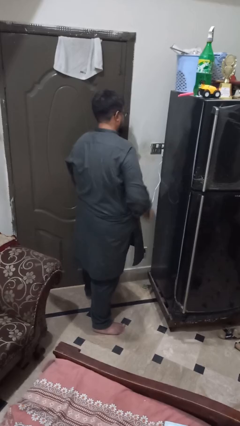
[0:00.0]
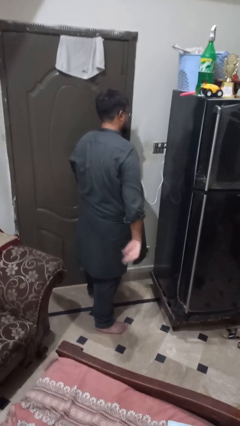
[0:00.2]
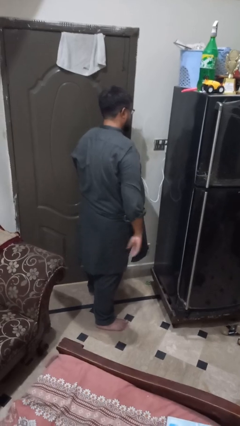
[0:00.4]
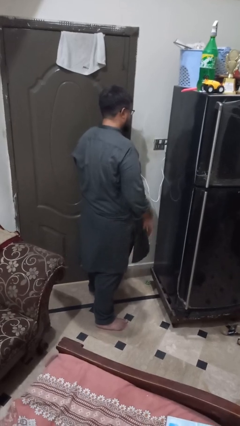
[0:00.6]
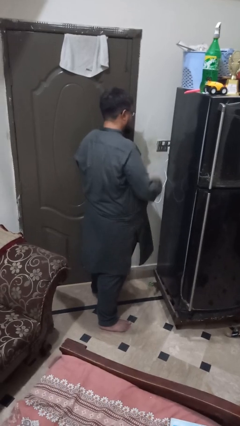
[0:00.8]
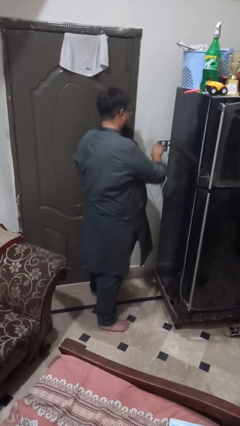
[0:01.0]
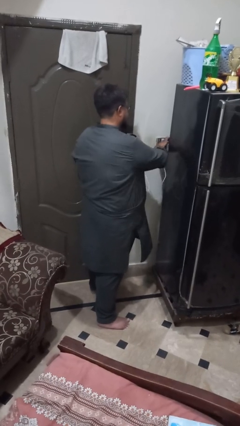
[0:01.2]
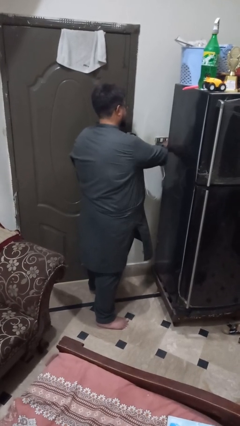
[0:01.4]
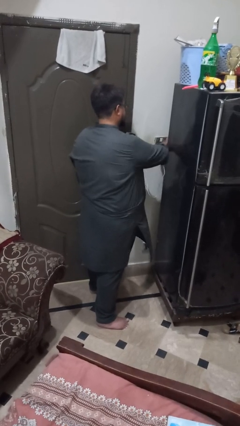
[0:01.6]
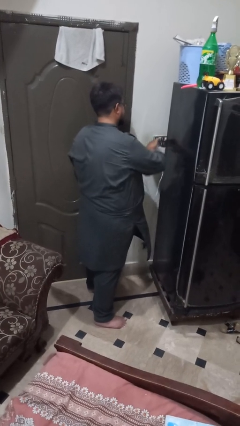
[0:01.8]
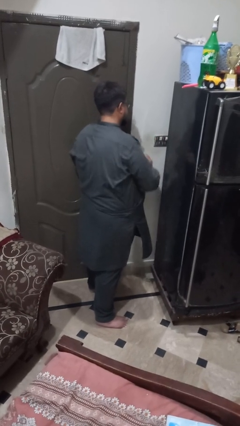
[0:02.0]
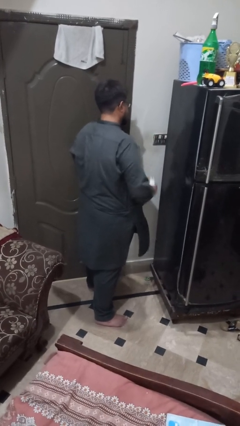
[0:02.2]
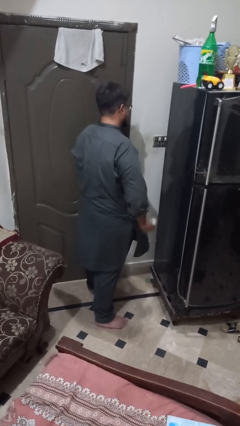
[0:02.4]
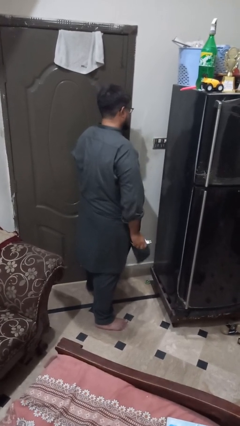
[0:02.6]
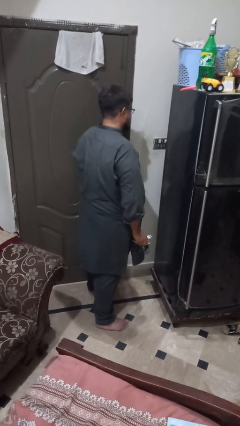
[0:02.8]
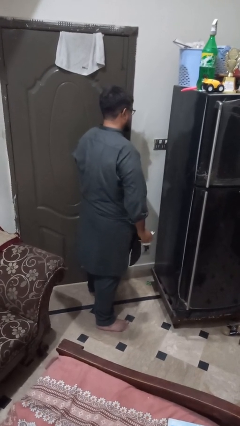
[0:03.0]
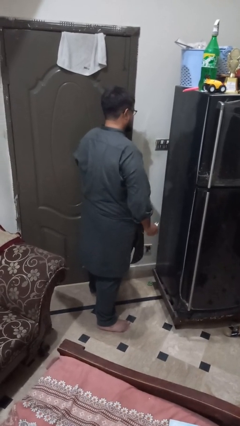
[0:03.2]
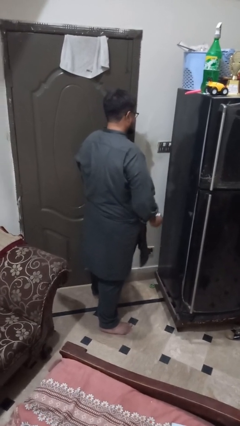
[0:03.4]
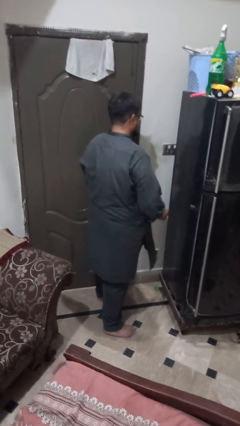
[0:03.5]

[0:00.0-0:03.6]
person unplugs from electrical socket

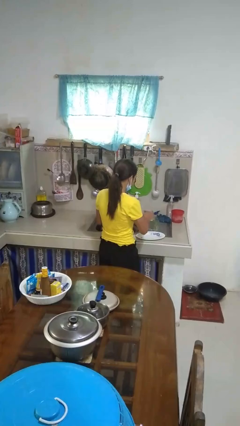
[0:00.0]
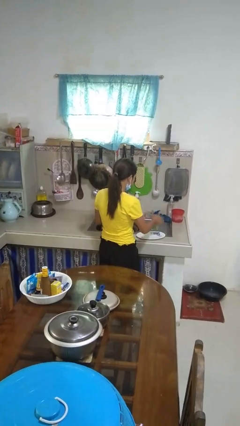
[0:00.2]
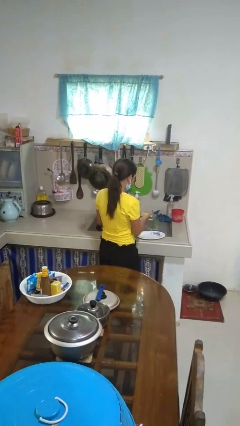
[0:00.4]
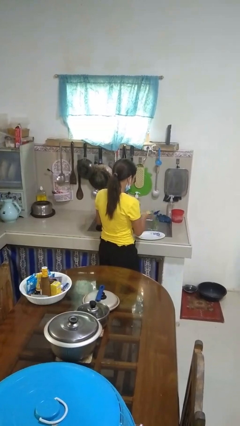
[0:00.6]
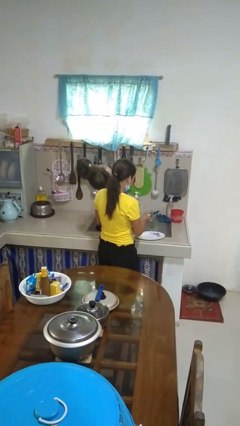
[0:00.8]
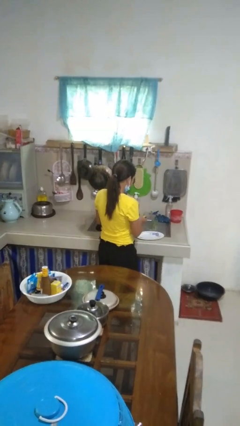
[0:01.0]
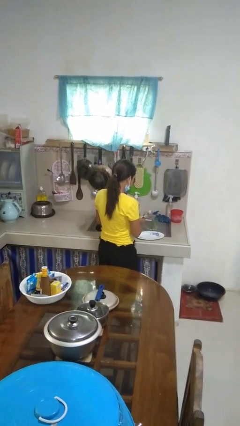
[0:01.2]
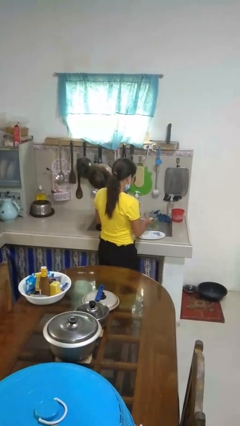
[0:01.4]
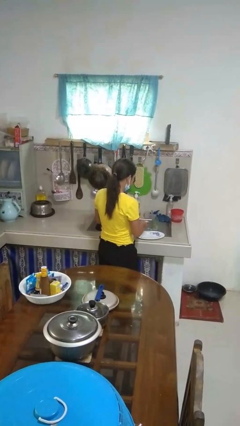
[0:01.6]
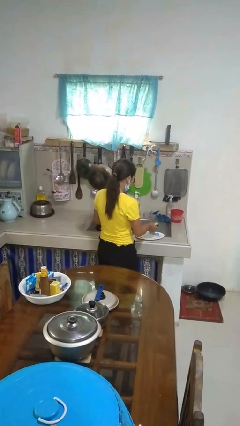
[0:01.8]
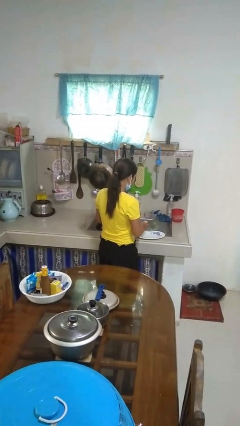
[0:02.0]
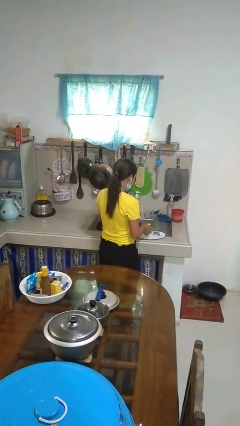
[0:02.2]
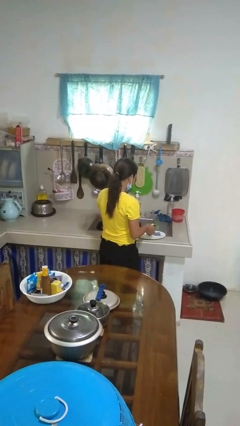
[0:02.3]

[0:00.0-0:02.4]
person washes dish

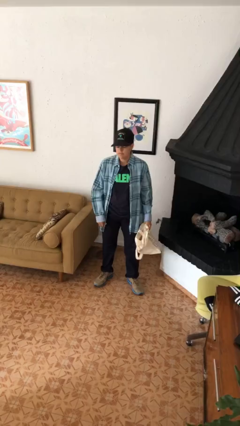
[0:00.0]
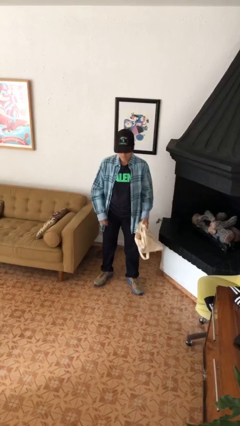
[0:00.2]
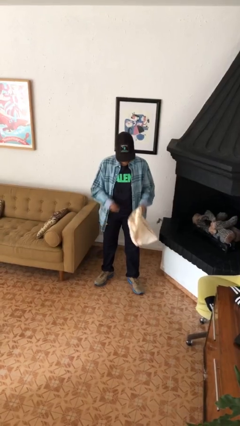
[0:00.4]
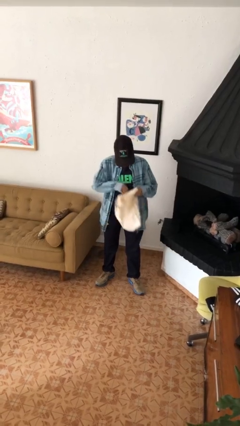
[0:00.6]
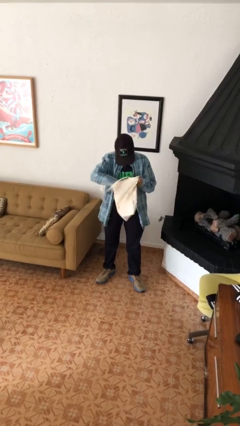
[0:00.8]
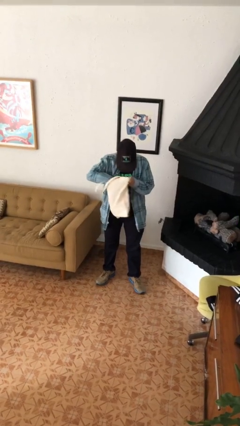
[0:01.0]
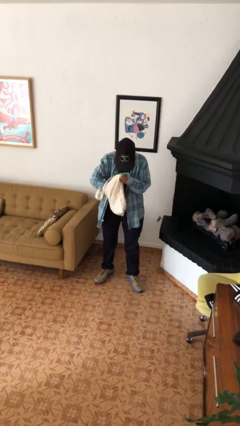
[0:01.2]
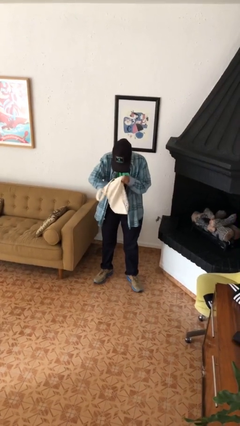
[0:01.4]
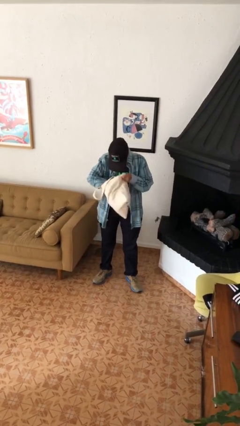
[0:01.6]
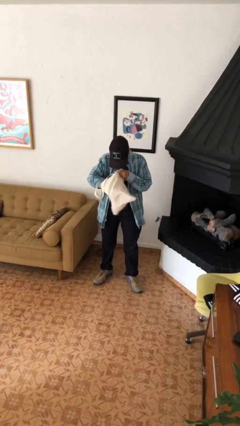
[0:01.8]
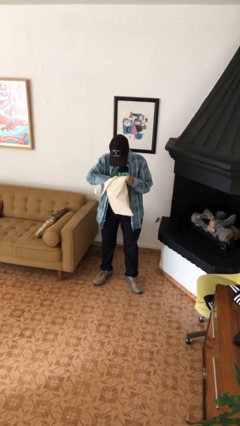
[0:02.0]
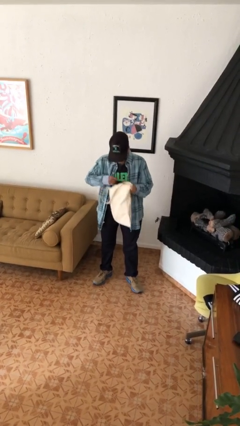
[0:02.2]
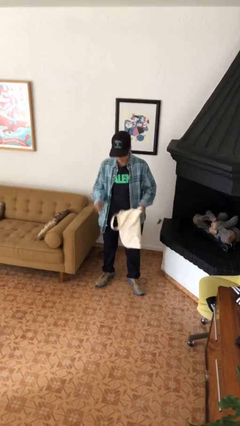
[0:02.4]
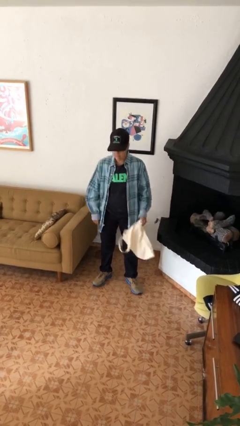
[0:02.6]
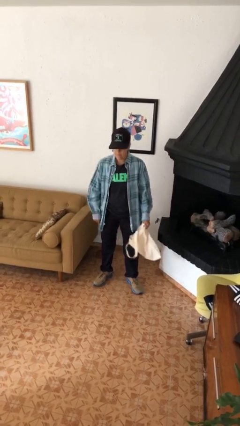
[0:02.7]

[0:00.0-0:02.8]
person searches in bag

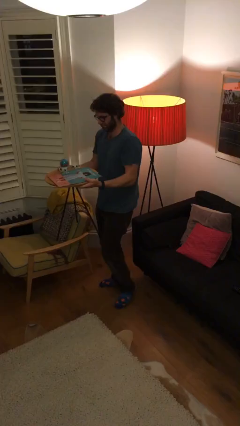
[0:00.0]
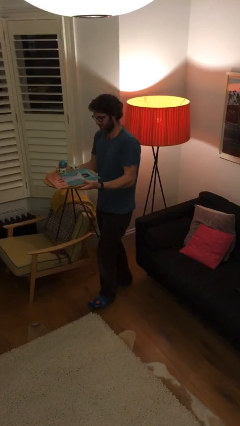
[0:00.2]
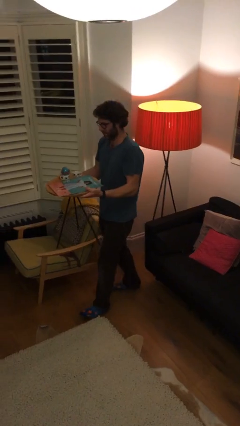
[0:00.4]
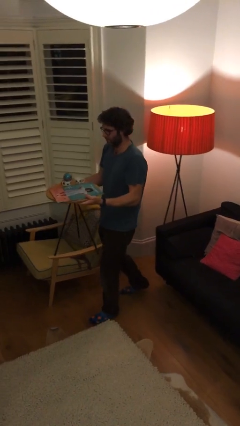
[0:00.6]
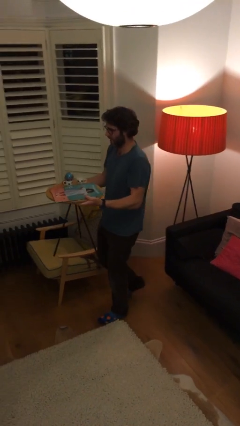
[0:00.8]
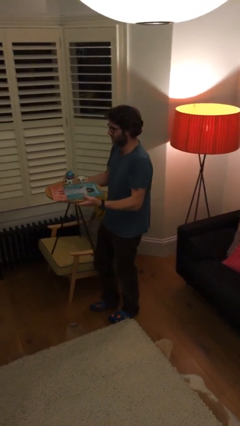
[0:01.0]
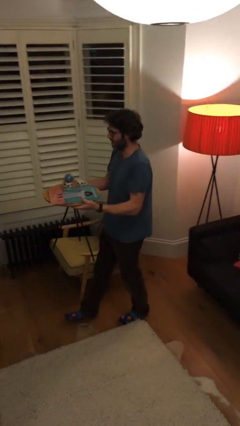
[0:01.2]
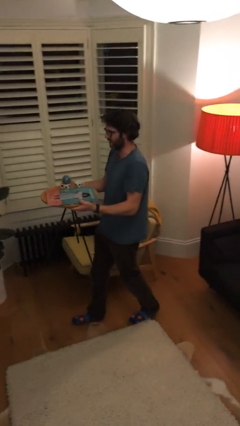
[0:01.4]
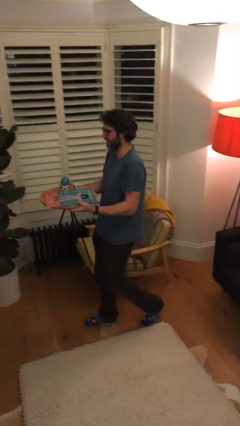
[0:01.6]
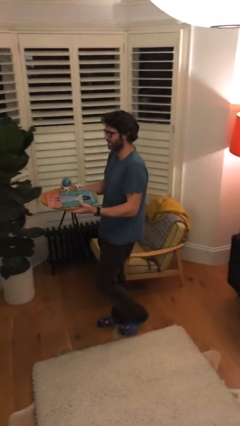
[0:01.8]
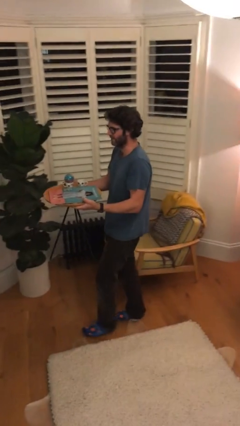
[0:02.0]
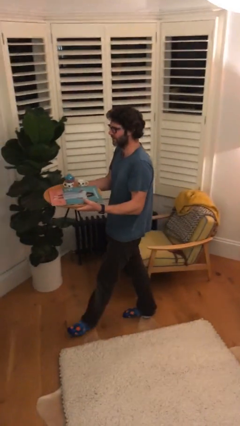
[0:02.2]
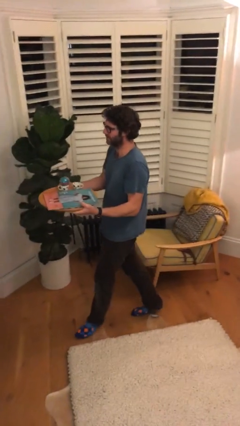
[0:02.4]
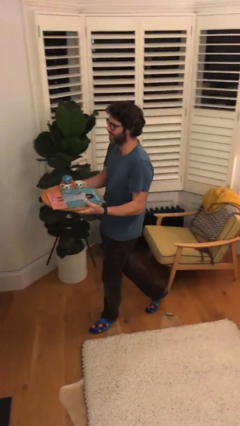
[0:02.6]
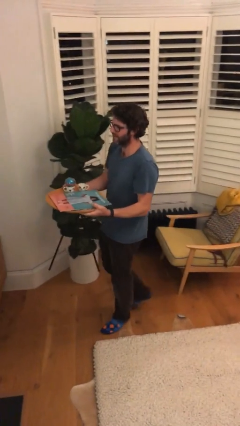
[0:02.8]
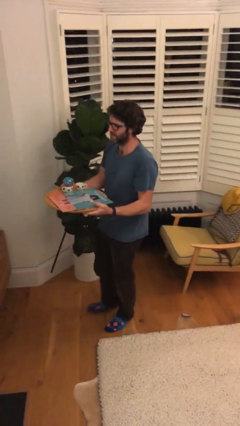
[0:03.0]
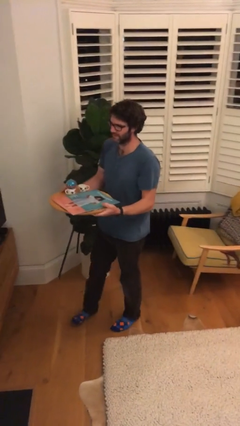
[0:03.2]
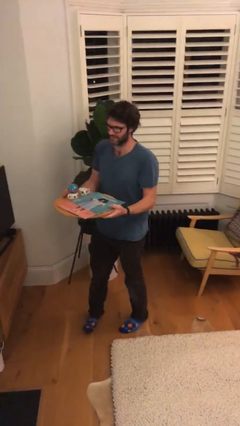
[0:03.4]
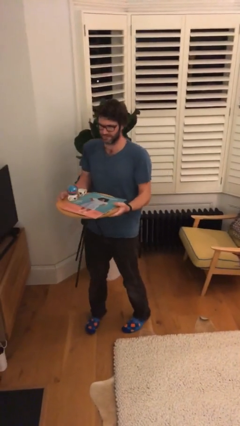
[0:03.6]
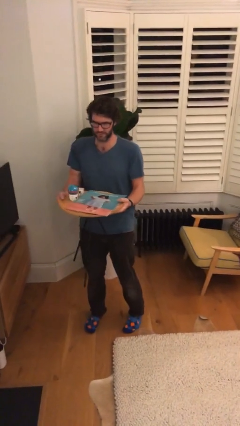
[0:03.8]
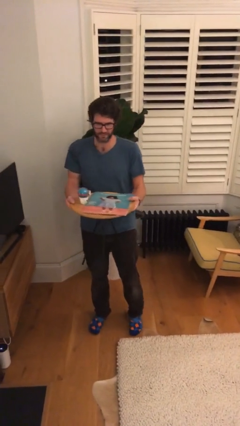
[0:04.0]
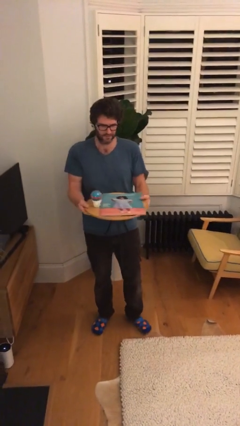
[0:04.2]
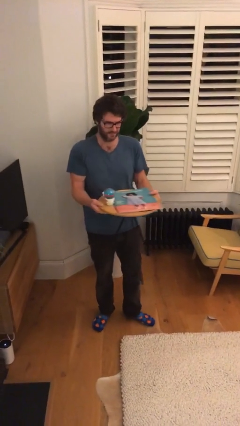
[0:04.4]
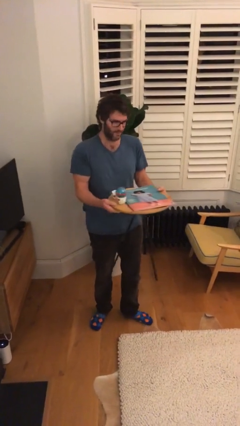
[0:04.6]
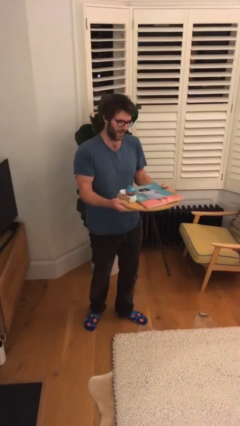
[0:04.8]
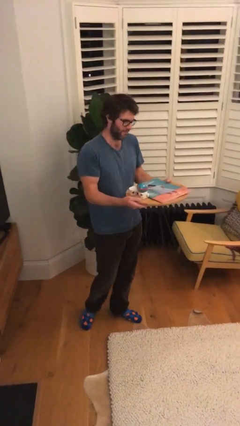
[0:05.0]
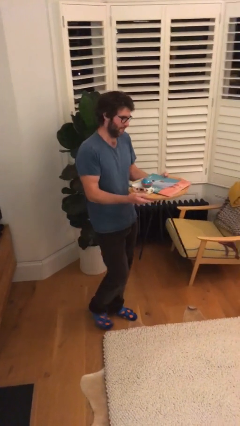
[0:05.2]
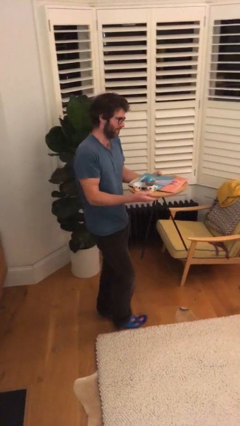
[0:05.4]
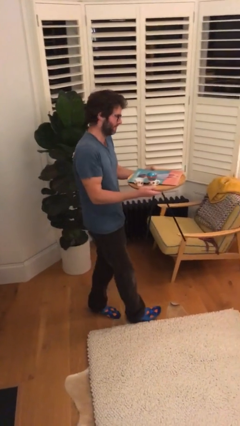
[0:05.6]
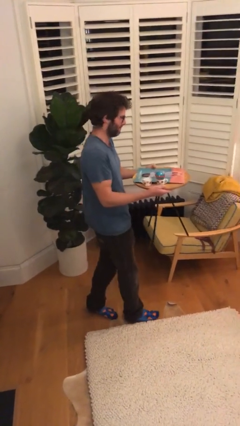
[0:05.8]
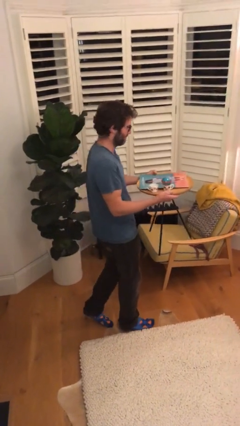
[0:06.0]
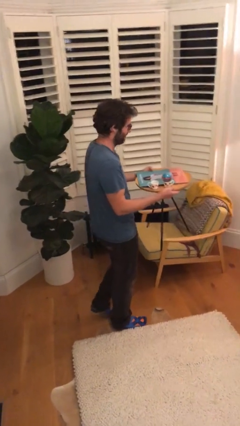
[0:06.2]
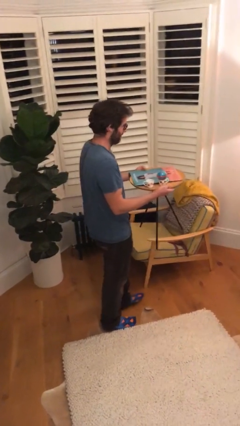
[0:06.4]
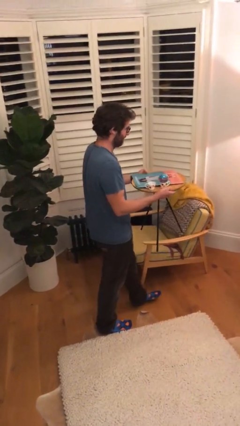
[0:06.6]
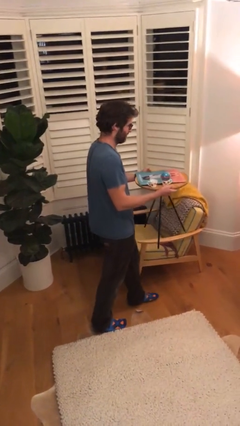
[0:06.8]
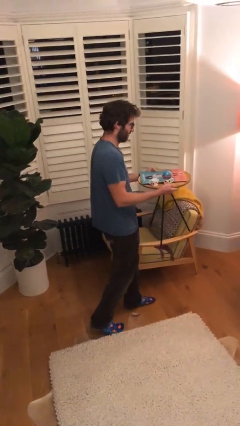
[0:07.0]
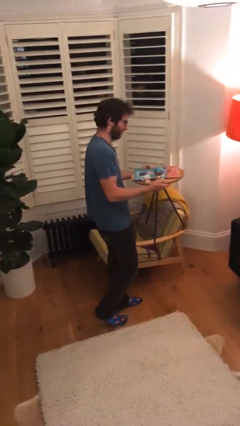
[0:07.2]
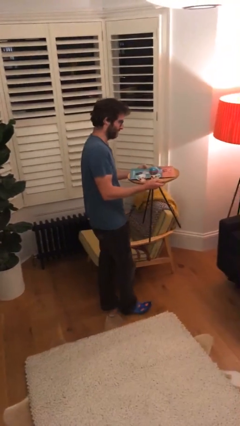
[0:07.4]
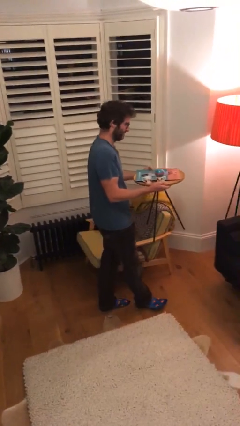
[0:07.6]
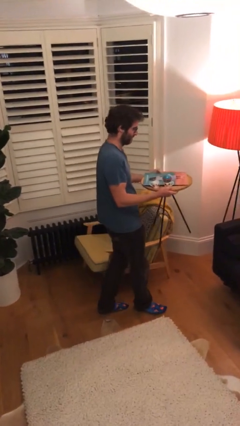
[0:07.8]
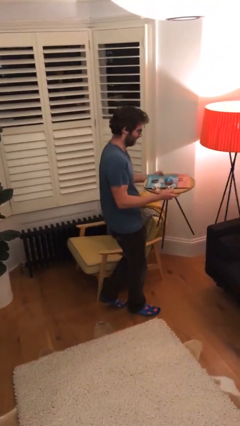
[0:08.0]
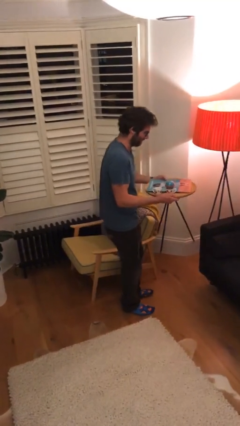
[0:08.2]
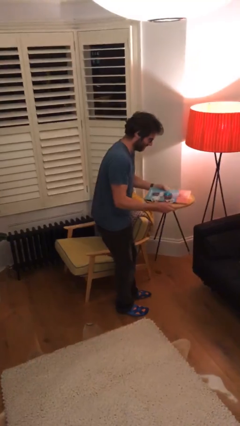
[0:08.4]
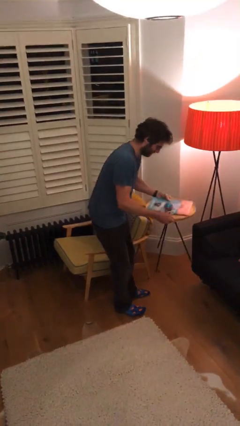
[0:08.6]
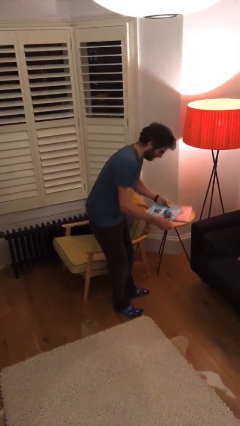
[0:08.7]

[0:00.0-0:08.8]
person carries heavy object

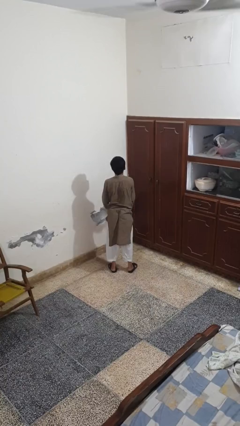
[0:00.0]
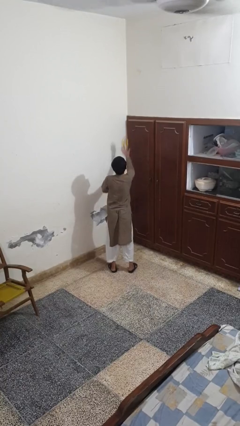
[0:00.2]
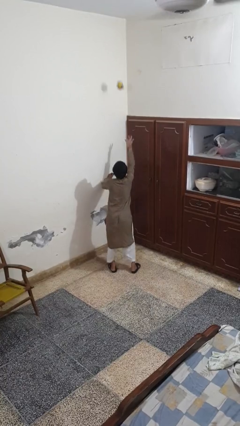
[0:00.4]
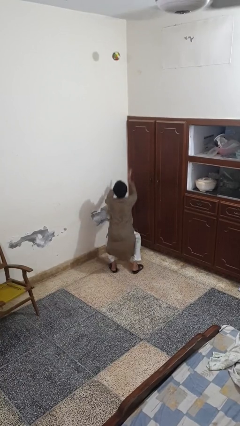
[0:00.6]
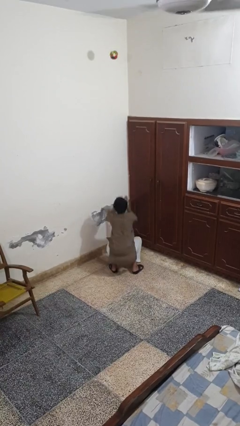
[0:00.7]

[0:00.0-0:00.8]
person drops object
